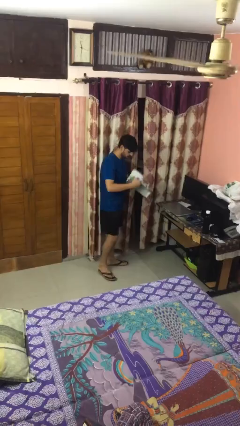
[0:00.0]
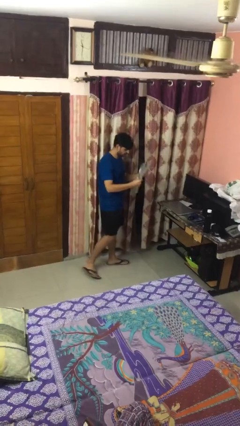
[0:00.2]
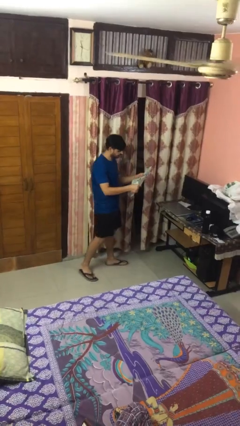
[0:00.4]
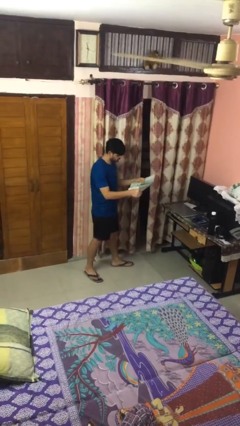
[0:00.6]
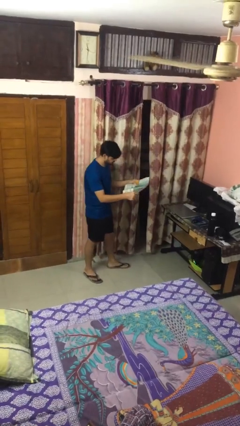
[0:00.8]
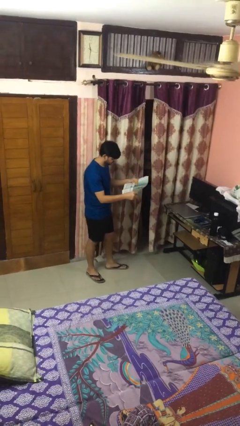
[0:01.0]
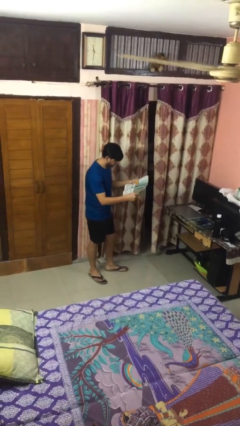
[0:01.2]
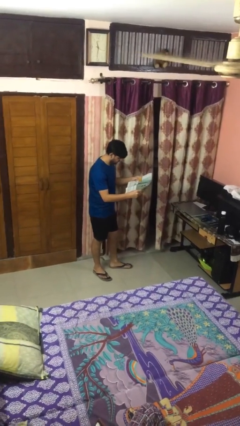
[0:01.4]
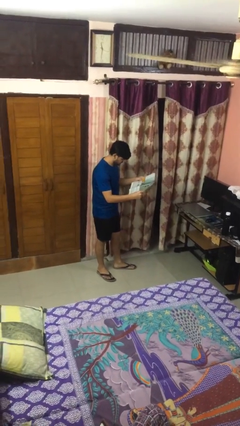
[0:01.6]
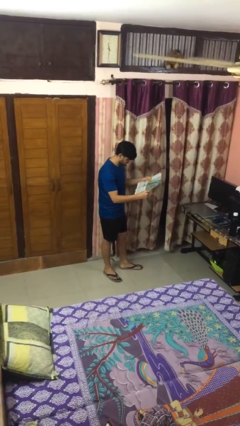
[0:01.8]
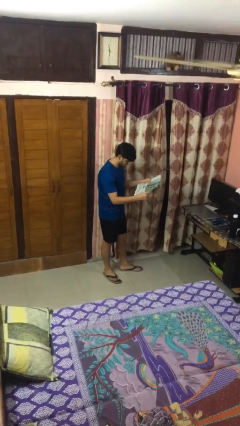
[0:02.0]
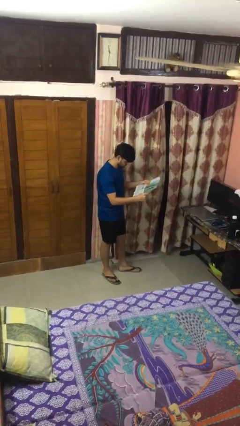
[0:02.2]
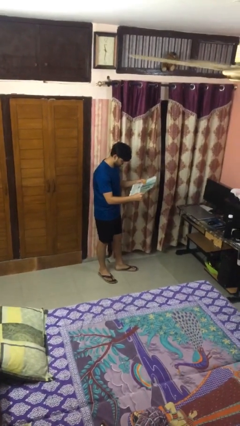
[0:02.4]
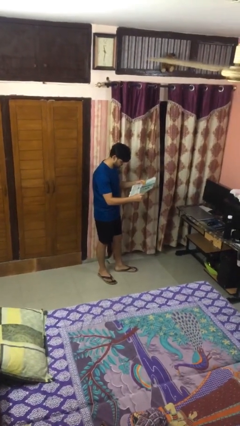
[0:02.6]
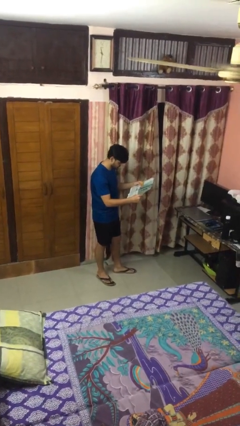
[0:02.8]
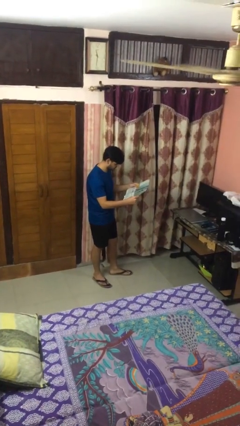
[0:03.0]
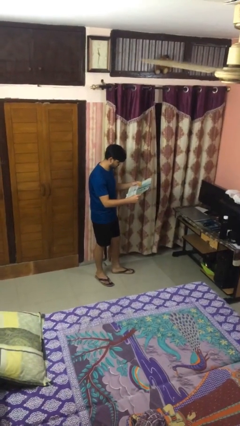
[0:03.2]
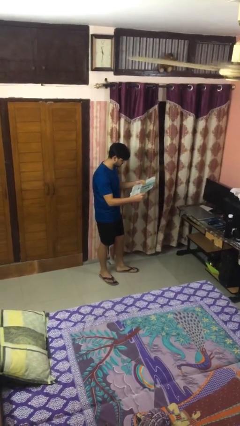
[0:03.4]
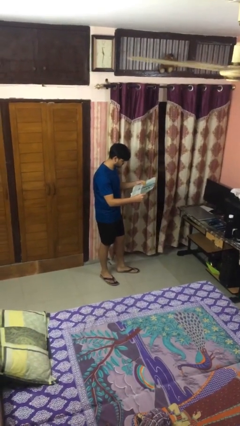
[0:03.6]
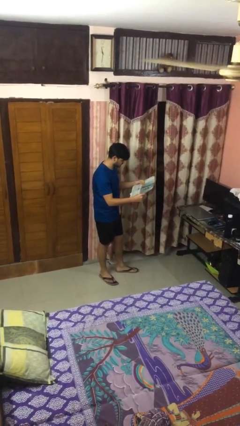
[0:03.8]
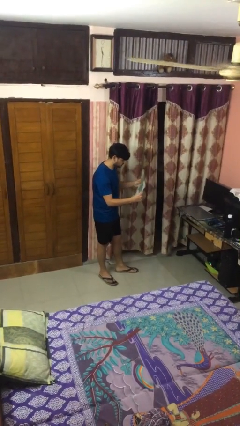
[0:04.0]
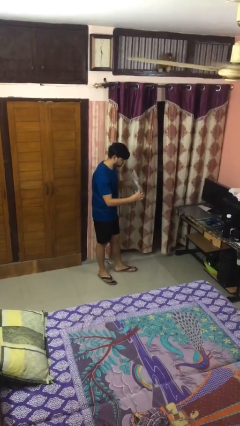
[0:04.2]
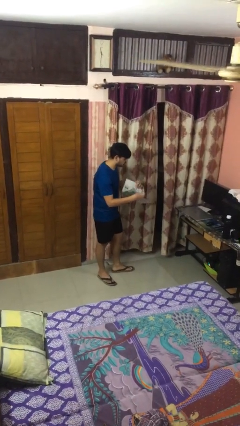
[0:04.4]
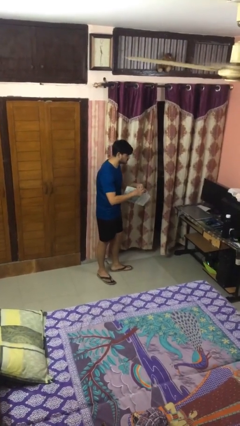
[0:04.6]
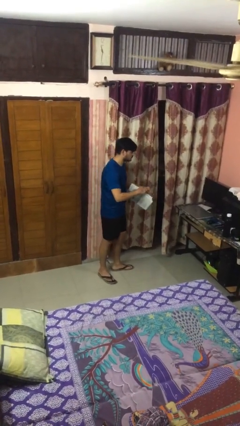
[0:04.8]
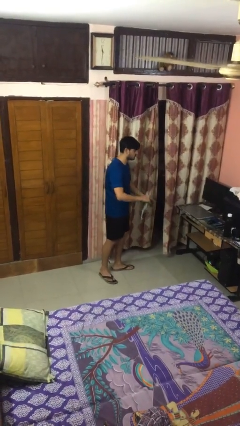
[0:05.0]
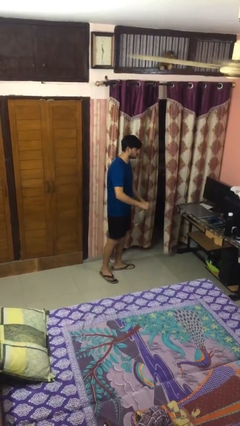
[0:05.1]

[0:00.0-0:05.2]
person reads newspaper

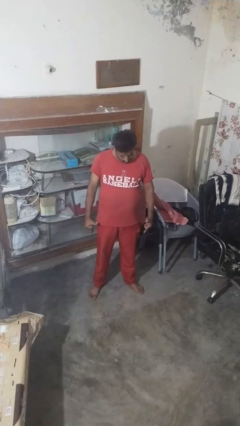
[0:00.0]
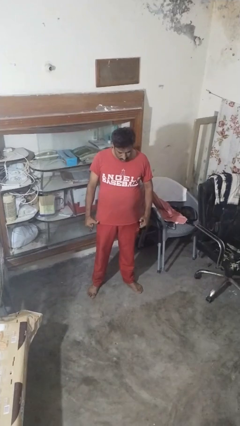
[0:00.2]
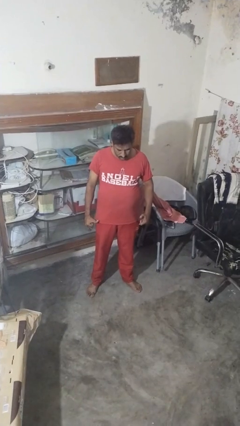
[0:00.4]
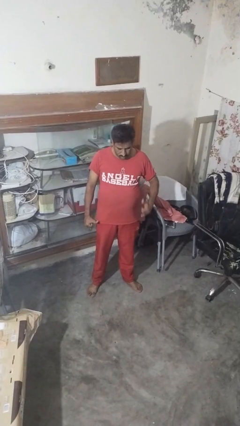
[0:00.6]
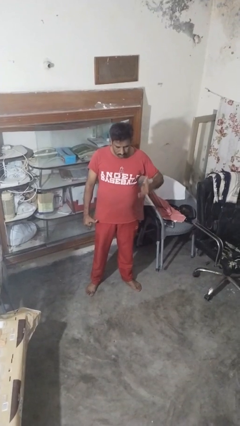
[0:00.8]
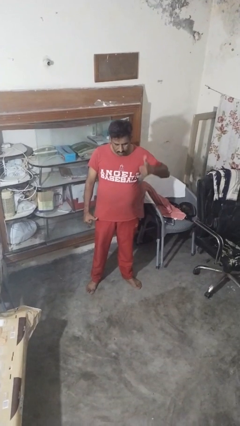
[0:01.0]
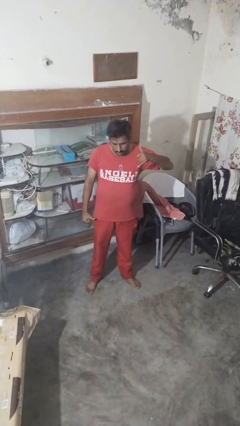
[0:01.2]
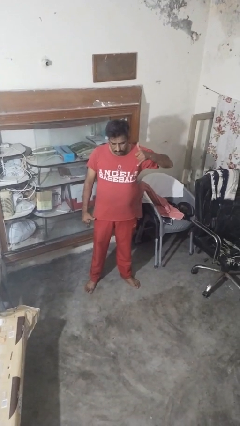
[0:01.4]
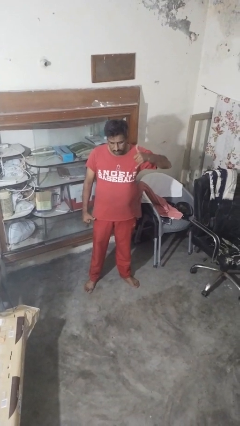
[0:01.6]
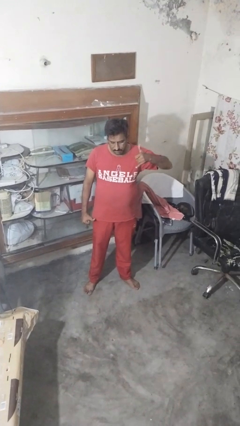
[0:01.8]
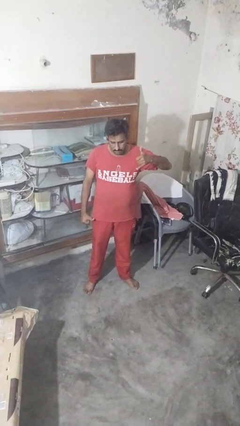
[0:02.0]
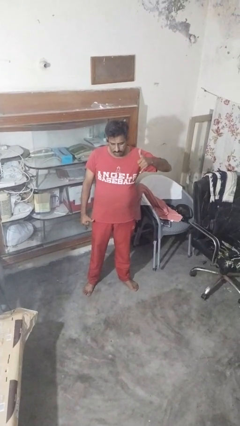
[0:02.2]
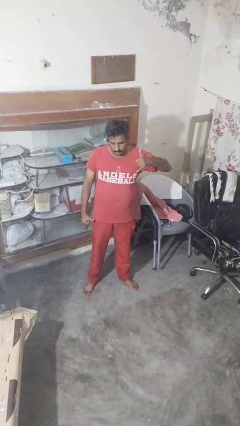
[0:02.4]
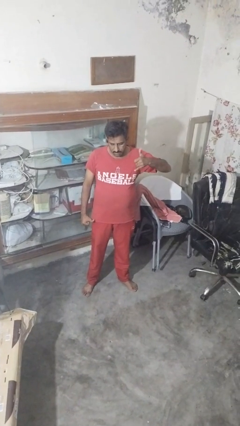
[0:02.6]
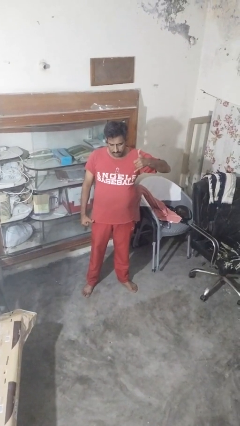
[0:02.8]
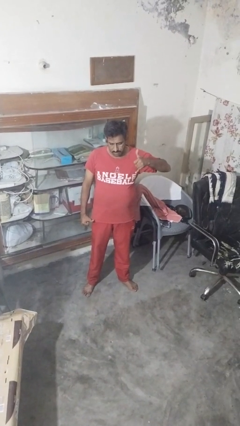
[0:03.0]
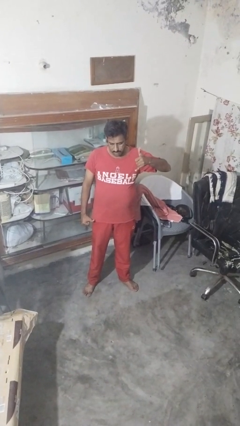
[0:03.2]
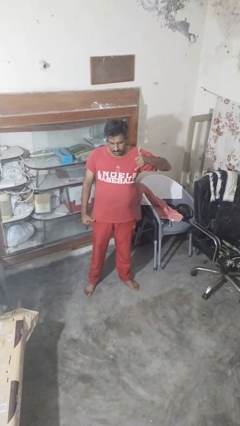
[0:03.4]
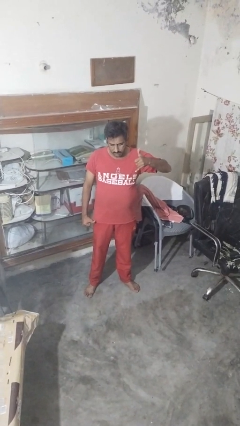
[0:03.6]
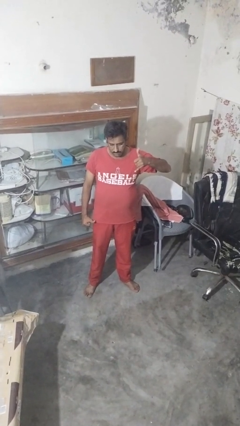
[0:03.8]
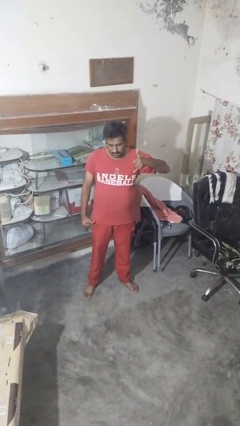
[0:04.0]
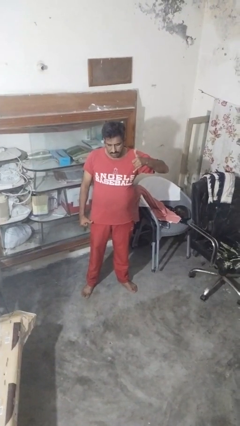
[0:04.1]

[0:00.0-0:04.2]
person gestures hang loose

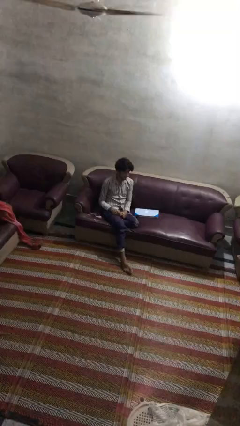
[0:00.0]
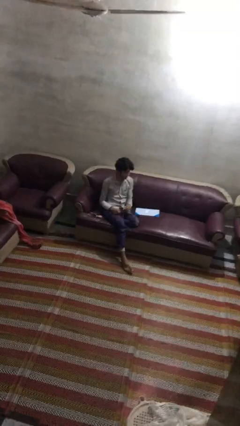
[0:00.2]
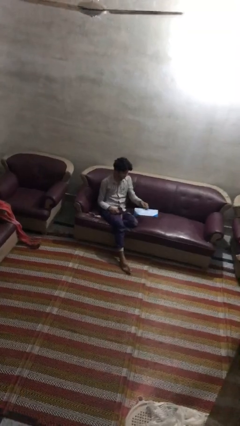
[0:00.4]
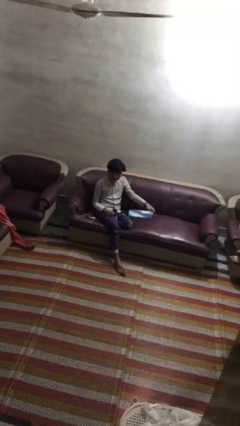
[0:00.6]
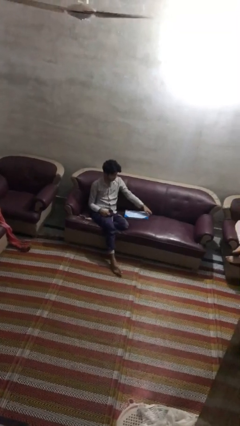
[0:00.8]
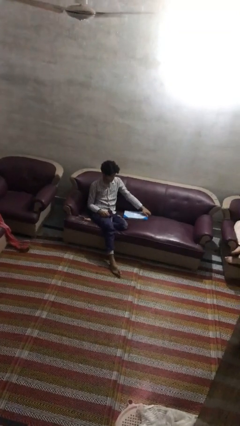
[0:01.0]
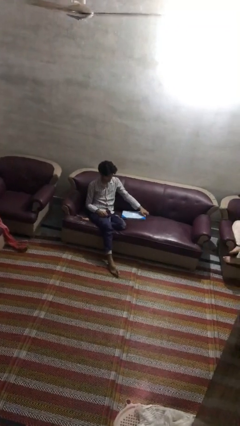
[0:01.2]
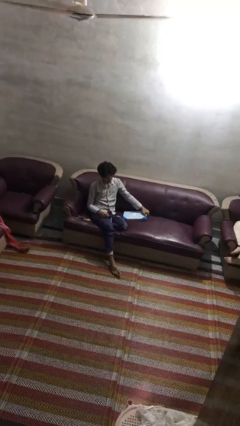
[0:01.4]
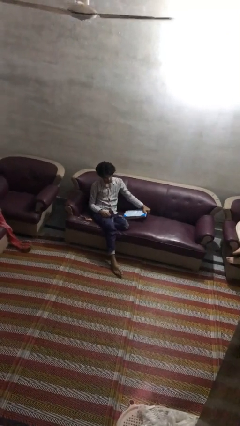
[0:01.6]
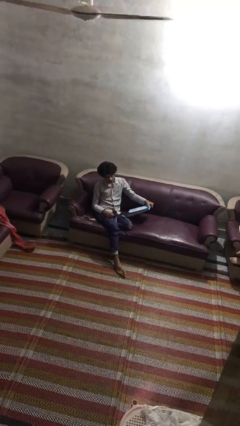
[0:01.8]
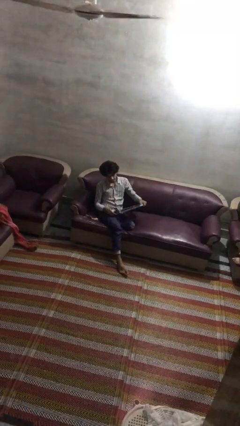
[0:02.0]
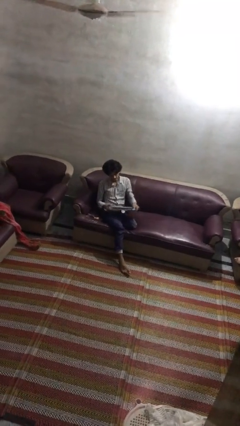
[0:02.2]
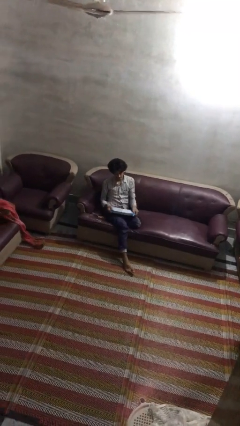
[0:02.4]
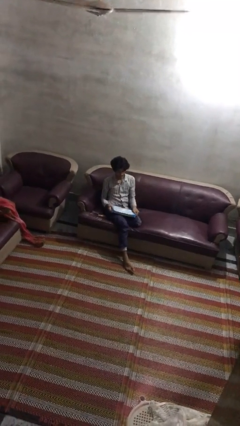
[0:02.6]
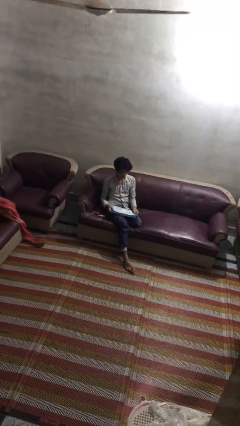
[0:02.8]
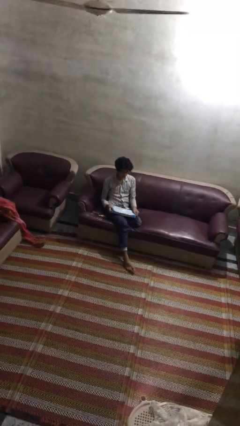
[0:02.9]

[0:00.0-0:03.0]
person picks up object from couch

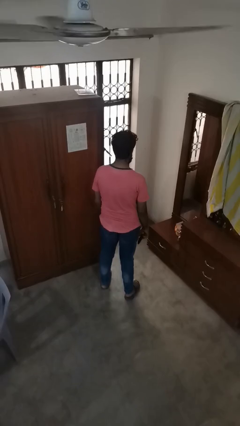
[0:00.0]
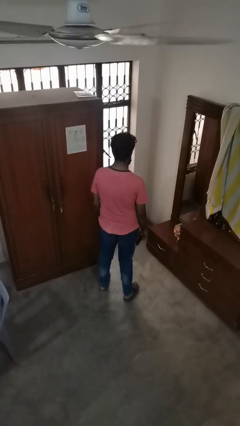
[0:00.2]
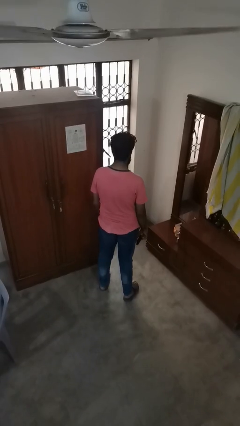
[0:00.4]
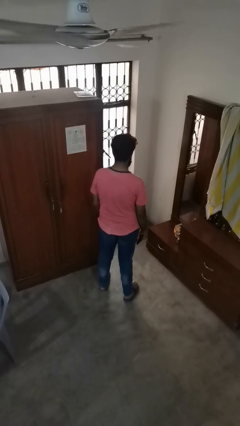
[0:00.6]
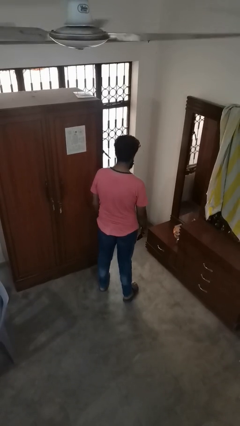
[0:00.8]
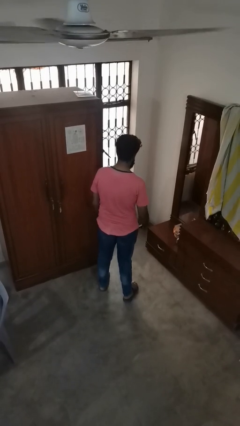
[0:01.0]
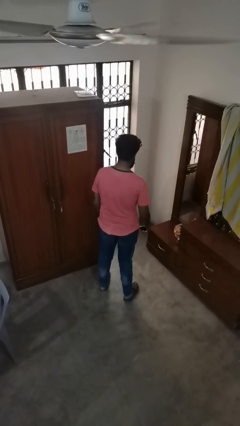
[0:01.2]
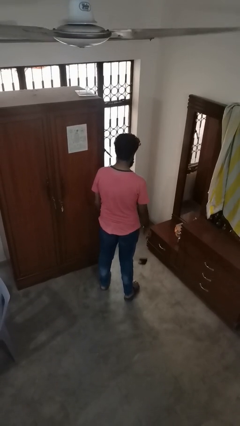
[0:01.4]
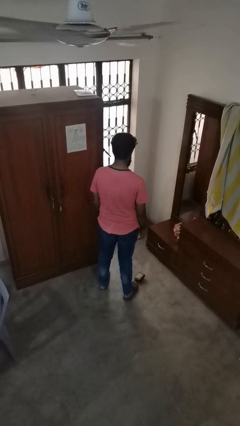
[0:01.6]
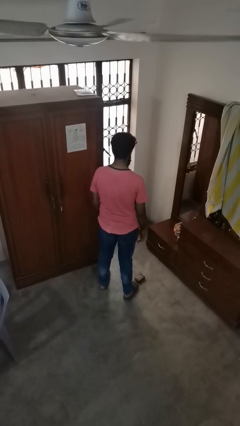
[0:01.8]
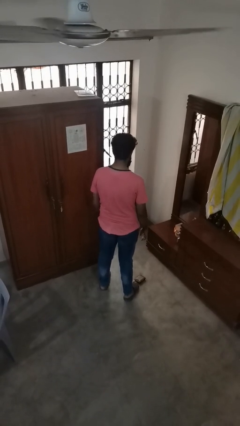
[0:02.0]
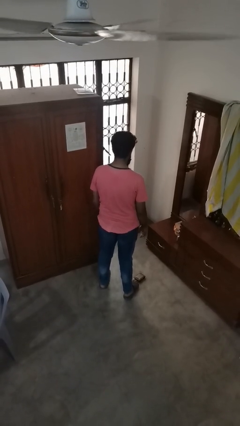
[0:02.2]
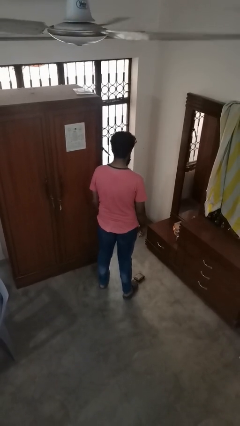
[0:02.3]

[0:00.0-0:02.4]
person throws object to ground

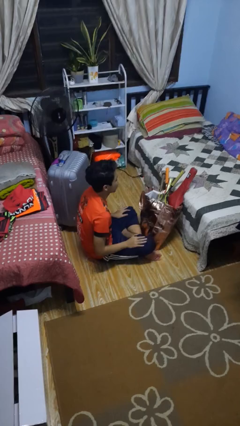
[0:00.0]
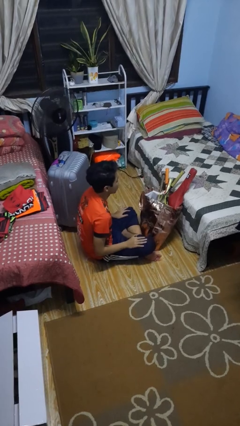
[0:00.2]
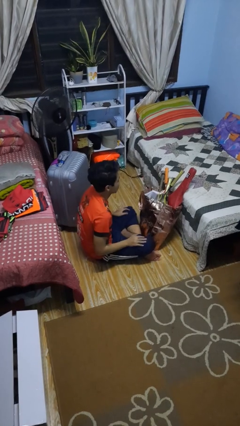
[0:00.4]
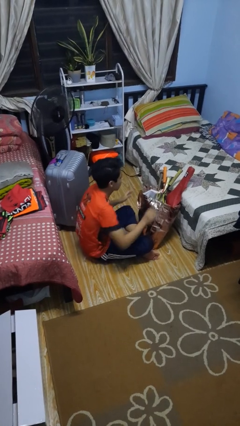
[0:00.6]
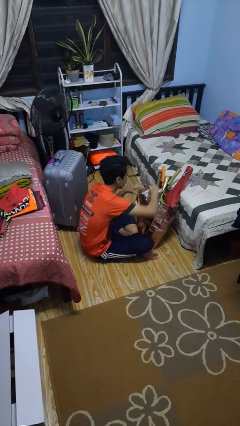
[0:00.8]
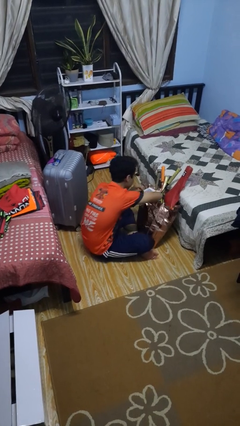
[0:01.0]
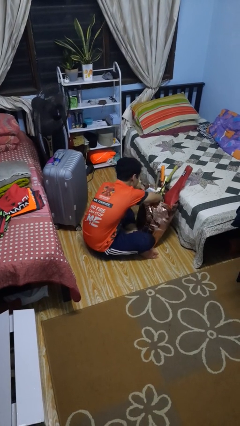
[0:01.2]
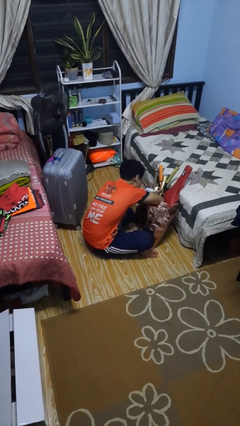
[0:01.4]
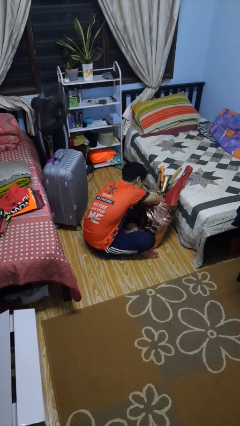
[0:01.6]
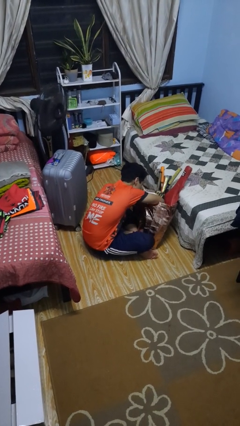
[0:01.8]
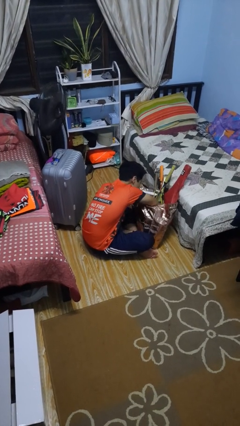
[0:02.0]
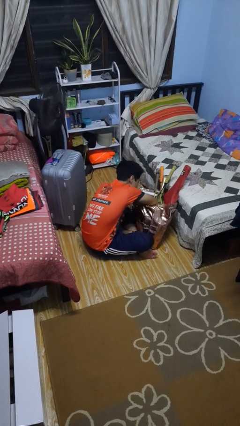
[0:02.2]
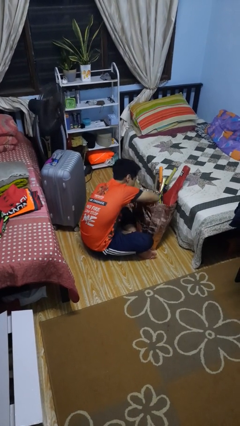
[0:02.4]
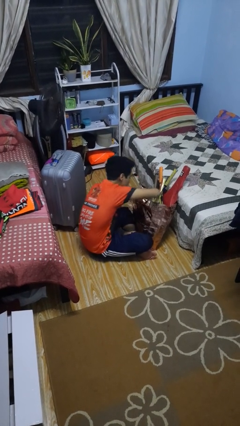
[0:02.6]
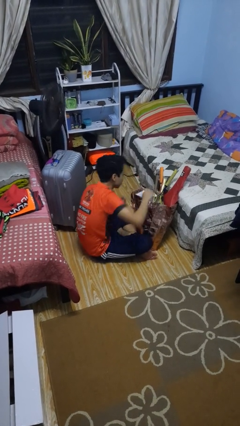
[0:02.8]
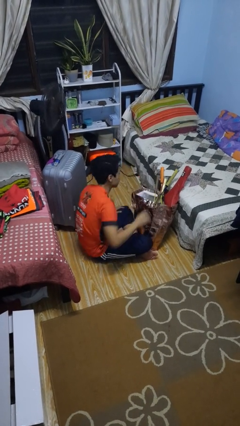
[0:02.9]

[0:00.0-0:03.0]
person searches in bag
